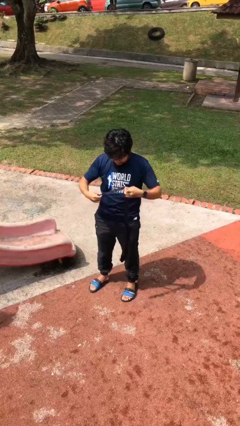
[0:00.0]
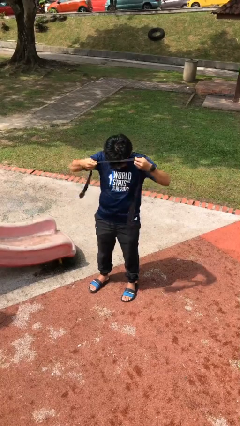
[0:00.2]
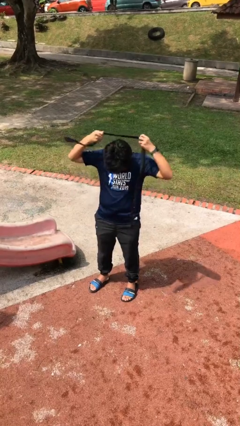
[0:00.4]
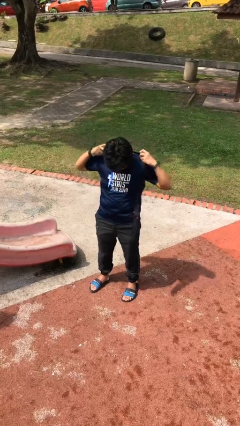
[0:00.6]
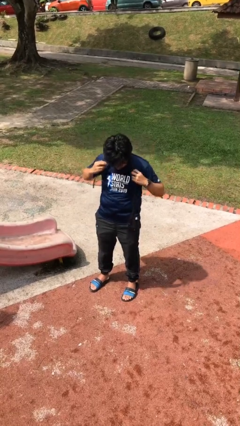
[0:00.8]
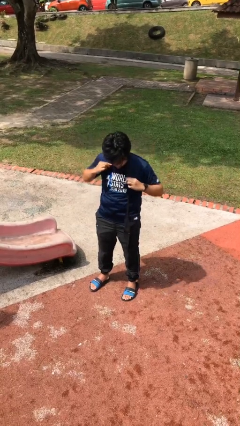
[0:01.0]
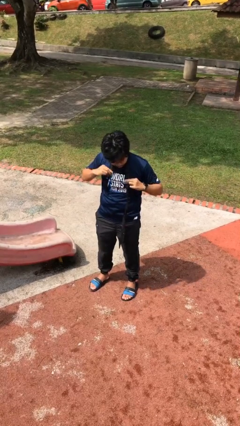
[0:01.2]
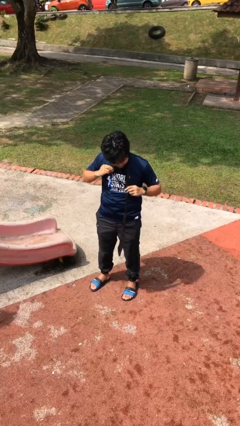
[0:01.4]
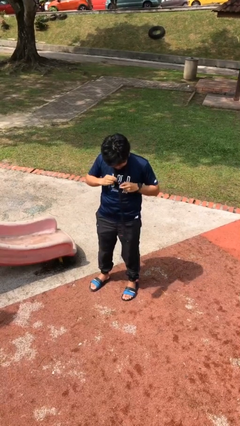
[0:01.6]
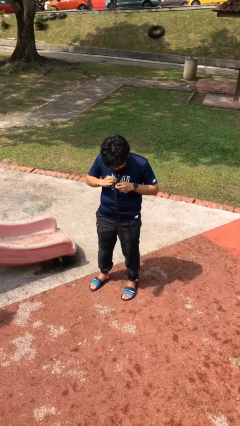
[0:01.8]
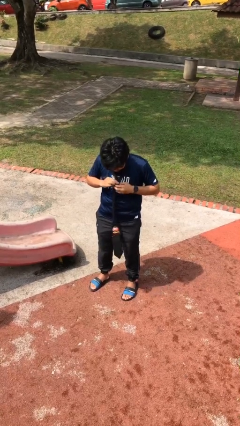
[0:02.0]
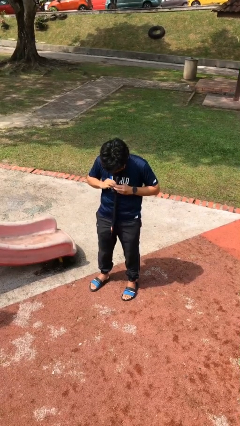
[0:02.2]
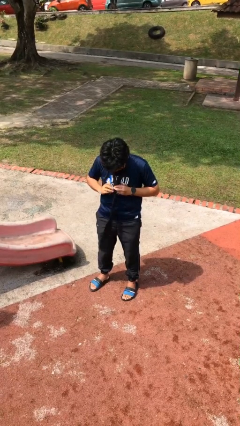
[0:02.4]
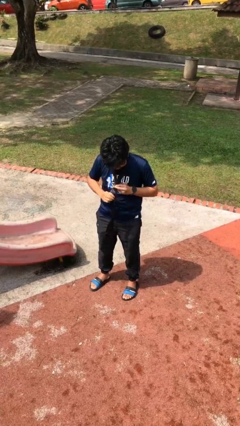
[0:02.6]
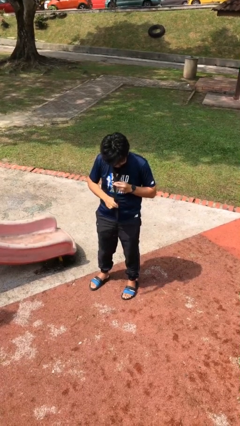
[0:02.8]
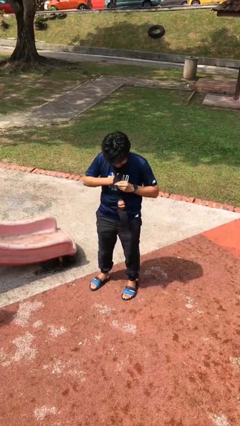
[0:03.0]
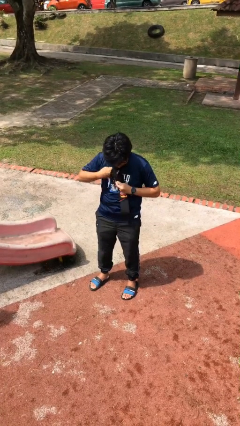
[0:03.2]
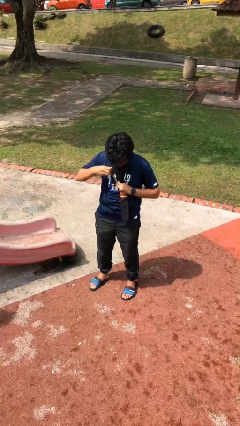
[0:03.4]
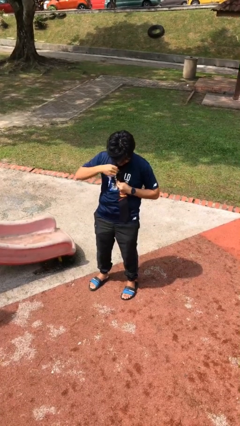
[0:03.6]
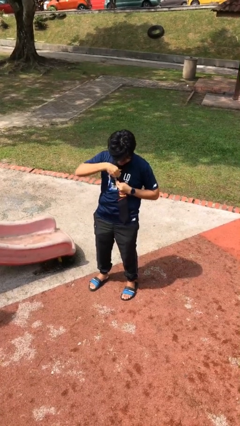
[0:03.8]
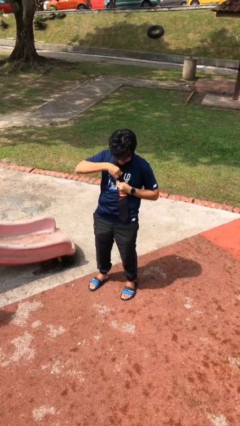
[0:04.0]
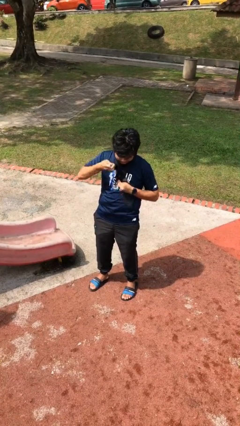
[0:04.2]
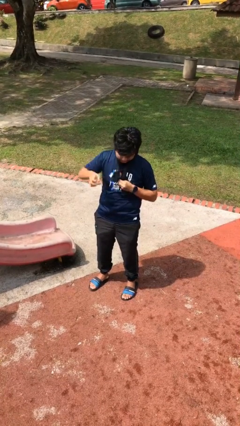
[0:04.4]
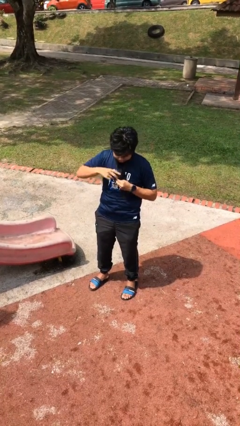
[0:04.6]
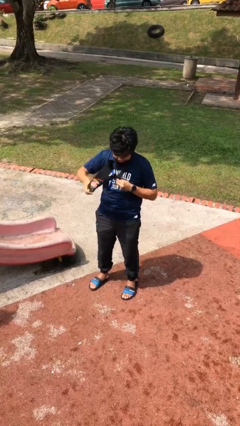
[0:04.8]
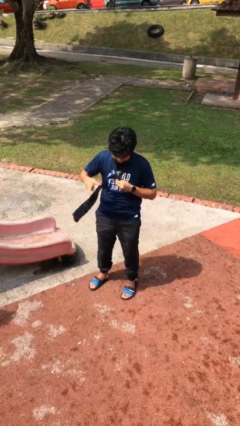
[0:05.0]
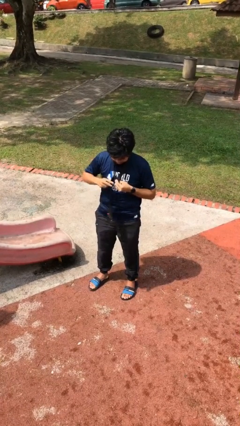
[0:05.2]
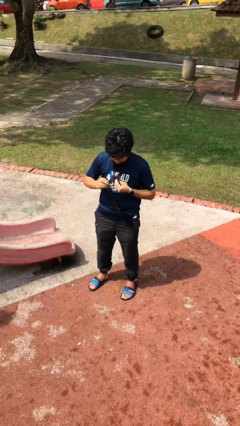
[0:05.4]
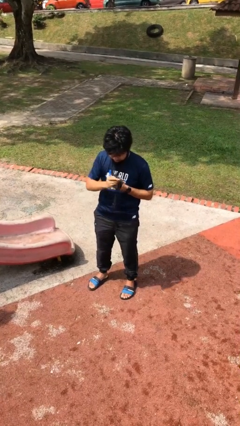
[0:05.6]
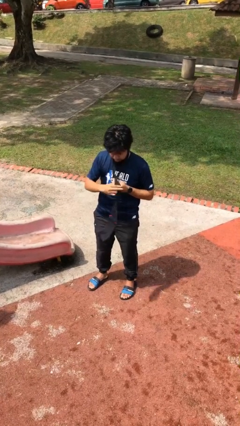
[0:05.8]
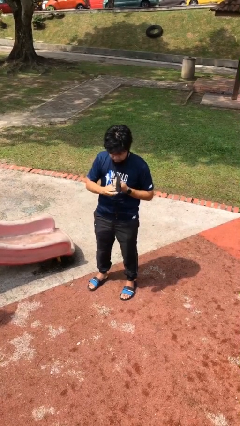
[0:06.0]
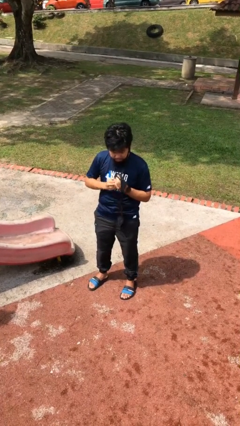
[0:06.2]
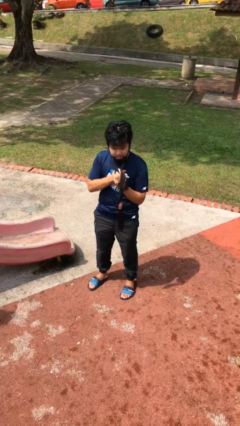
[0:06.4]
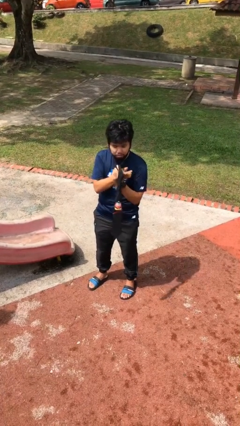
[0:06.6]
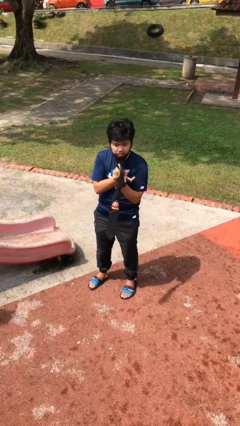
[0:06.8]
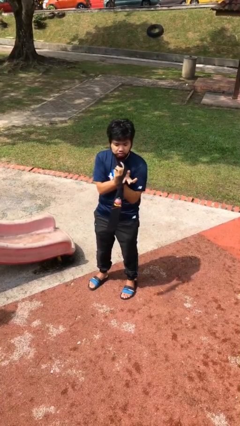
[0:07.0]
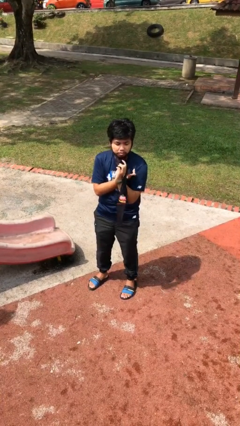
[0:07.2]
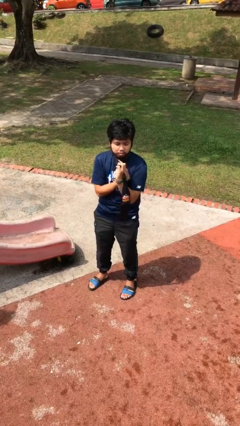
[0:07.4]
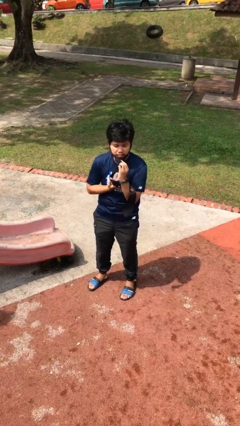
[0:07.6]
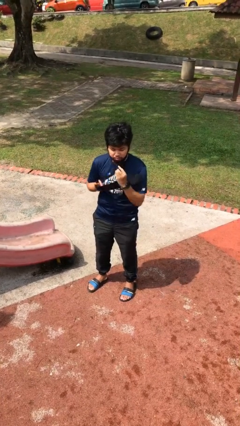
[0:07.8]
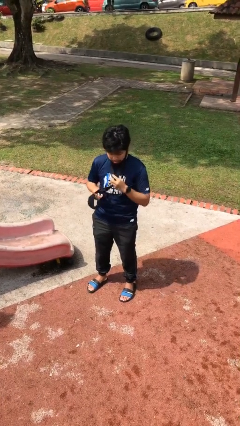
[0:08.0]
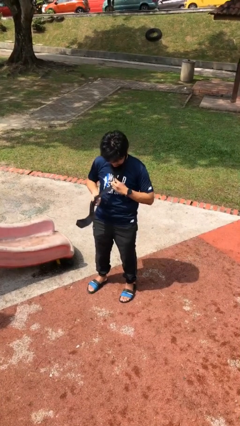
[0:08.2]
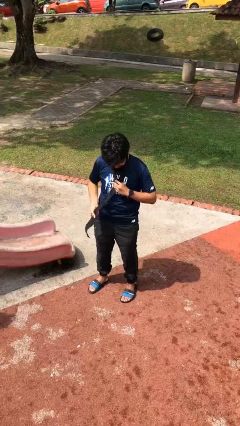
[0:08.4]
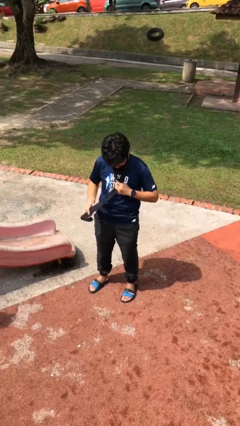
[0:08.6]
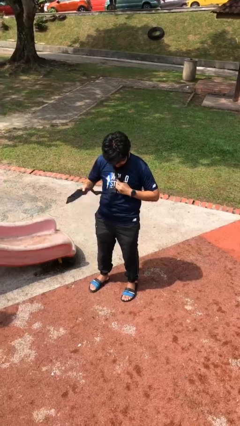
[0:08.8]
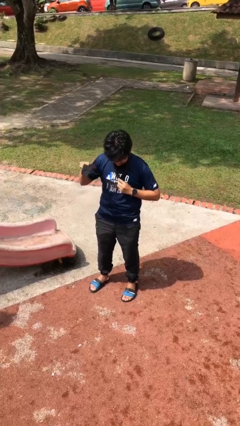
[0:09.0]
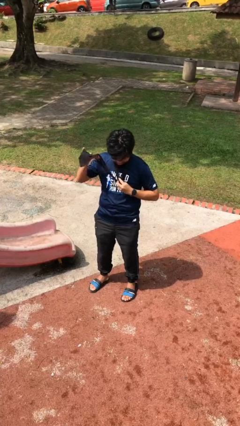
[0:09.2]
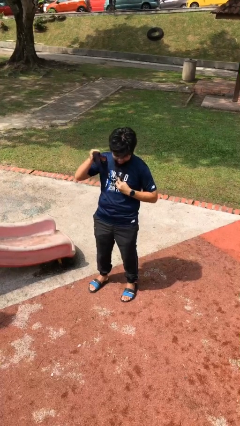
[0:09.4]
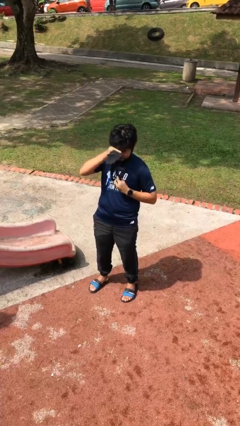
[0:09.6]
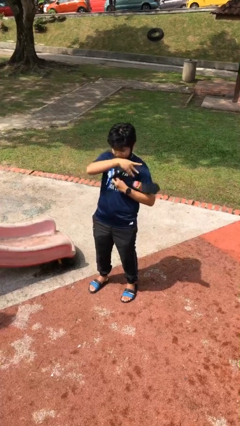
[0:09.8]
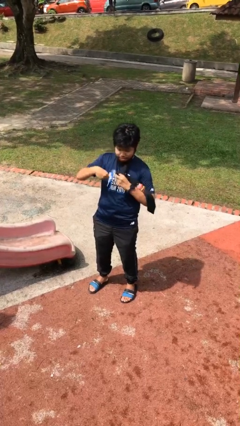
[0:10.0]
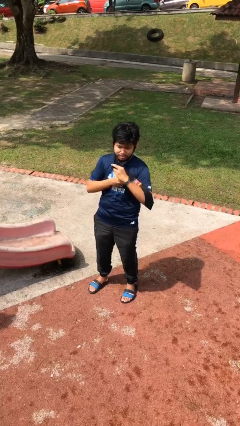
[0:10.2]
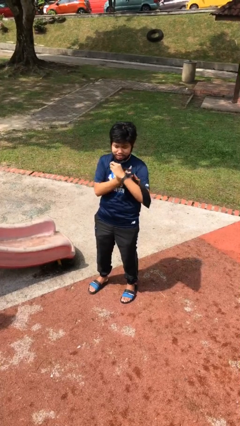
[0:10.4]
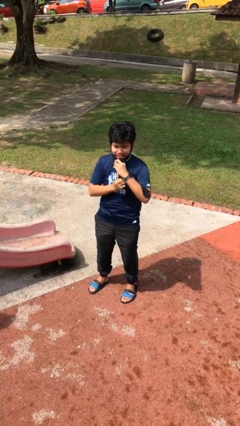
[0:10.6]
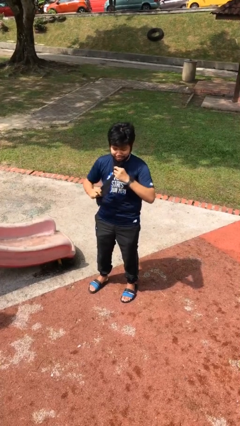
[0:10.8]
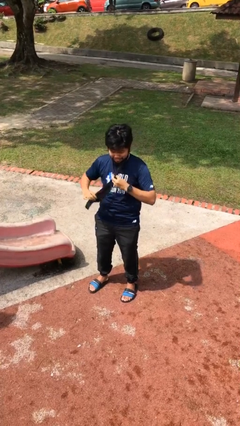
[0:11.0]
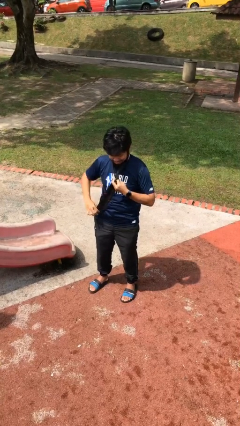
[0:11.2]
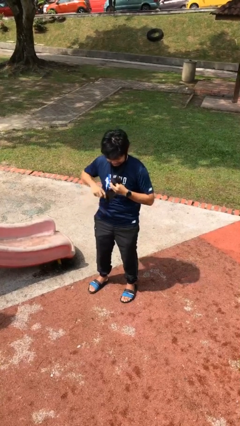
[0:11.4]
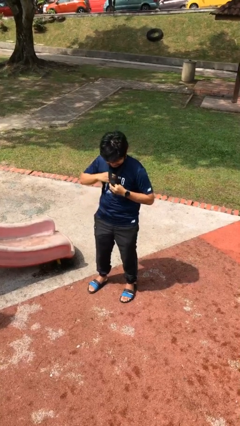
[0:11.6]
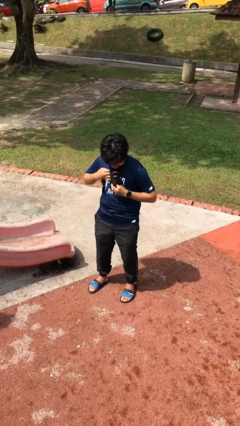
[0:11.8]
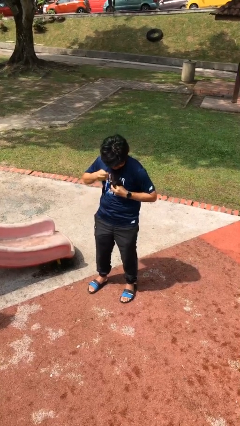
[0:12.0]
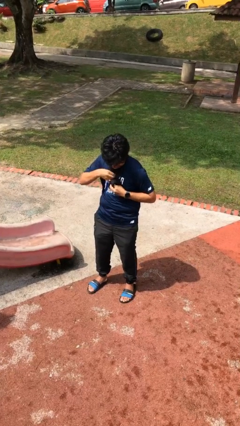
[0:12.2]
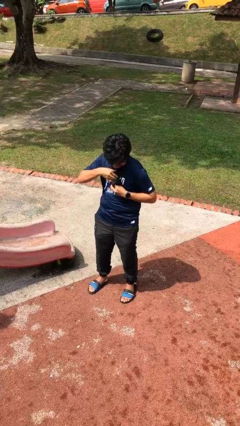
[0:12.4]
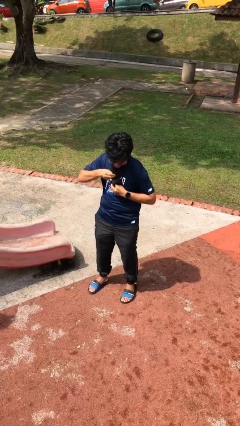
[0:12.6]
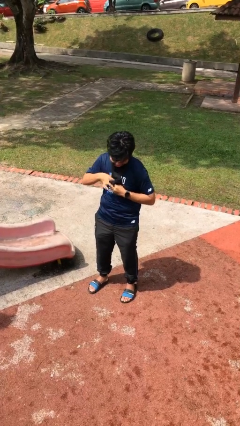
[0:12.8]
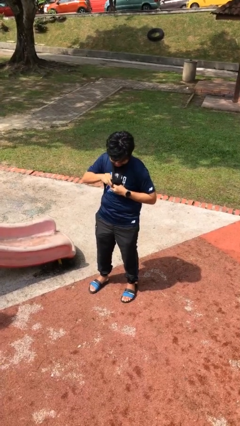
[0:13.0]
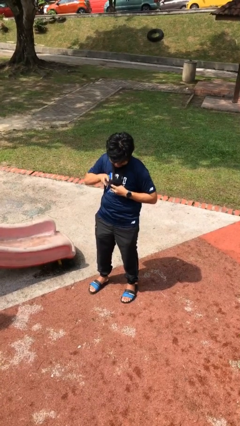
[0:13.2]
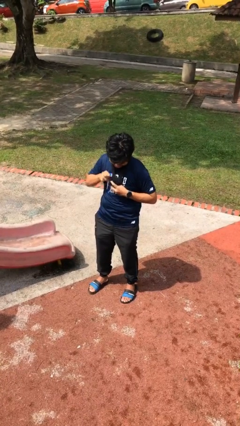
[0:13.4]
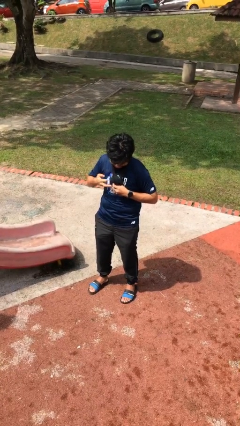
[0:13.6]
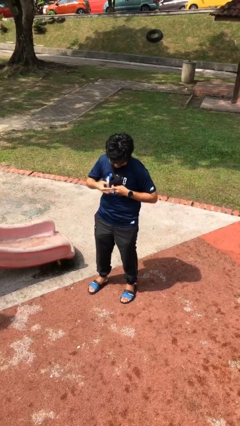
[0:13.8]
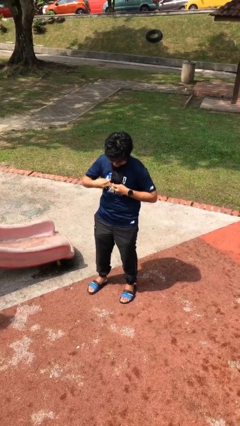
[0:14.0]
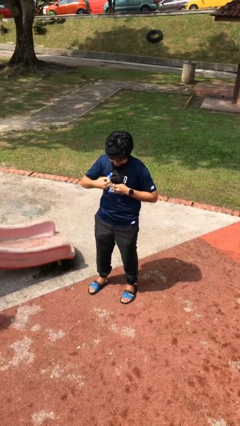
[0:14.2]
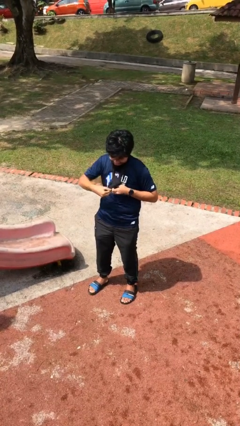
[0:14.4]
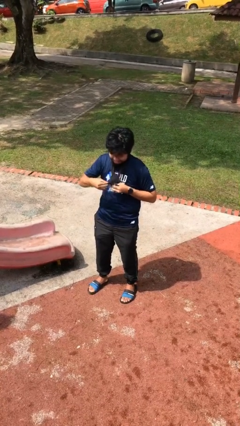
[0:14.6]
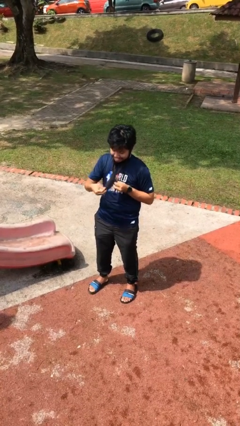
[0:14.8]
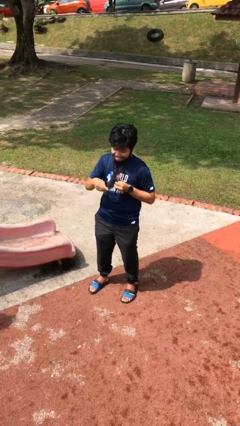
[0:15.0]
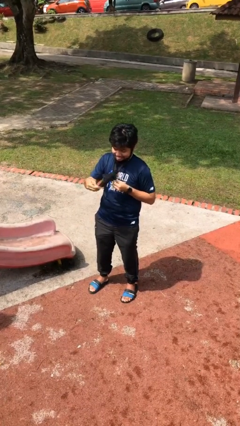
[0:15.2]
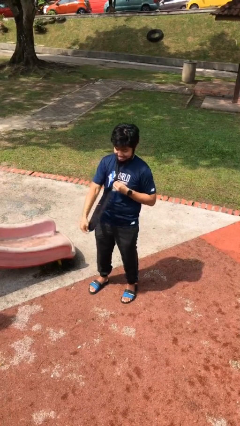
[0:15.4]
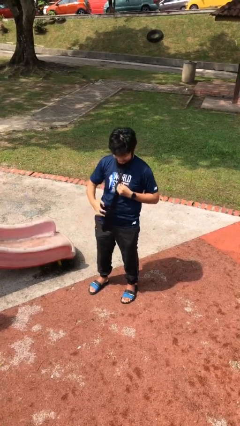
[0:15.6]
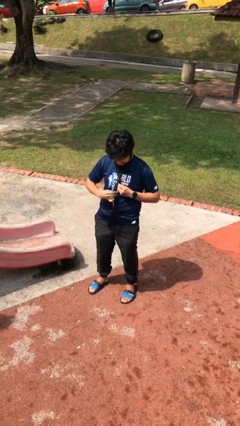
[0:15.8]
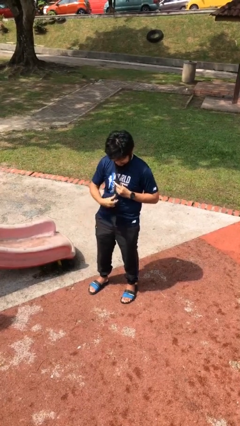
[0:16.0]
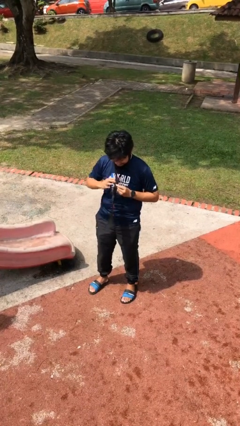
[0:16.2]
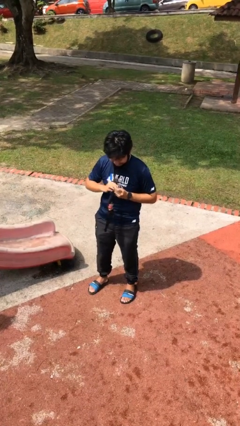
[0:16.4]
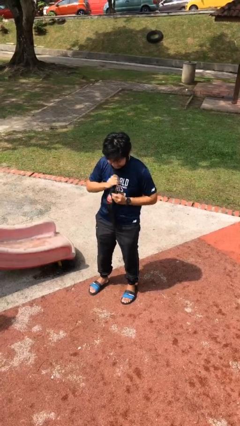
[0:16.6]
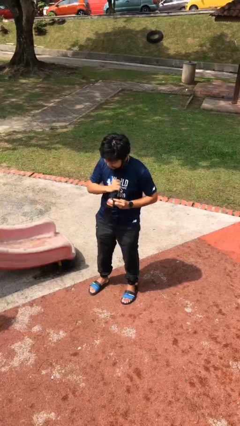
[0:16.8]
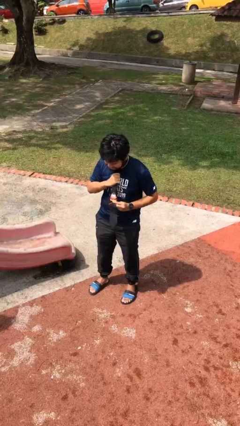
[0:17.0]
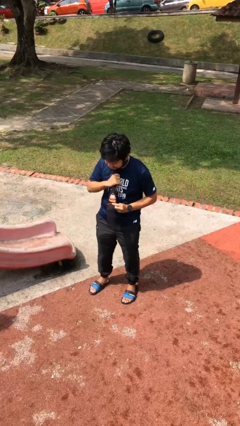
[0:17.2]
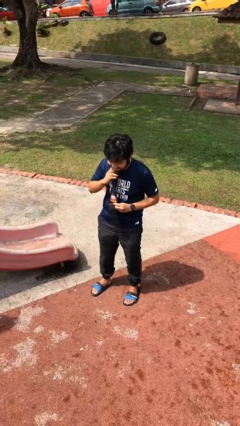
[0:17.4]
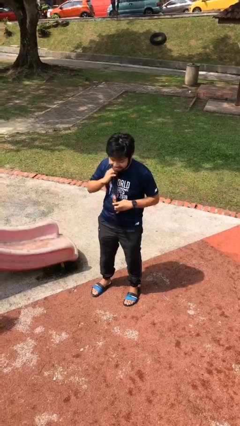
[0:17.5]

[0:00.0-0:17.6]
person puts on necktie

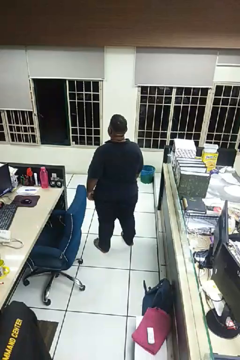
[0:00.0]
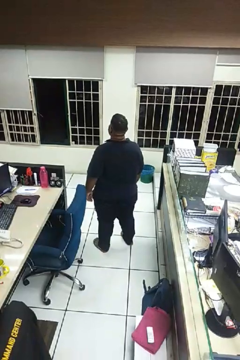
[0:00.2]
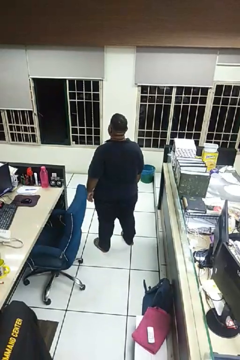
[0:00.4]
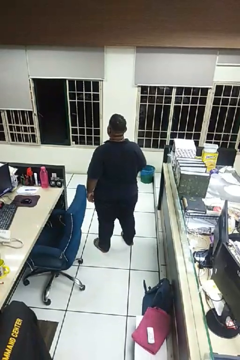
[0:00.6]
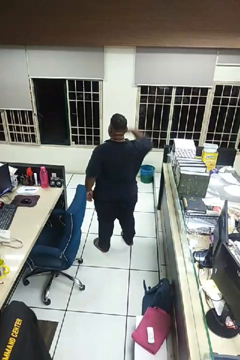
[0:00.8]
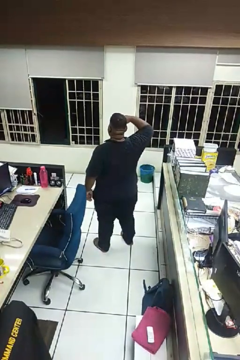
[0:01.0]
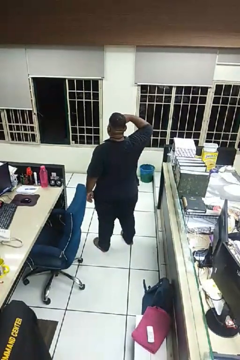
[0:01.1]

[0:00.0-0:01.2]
person salutes
